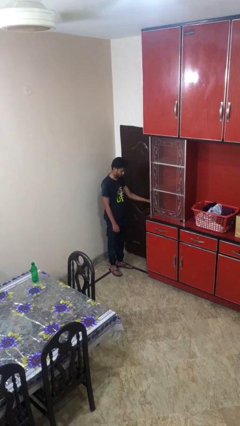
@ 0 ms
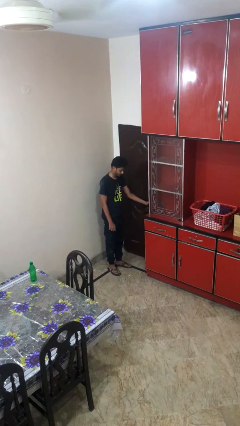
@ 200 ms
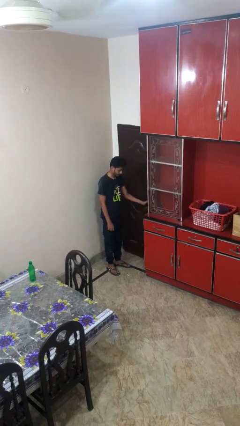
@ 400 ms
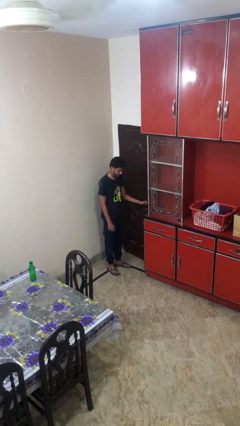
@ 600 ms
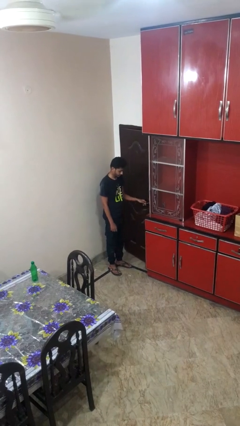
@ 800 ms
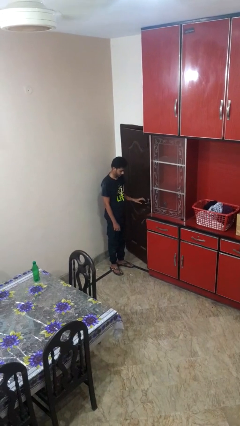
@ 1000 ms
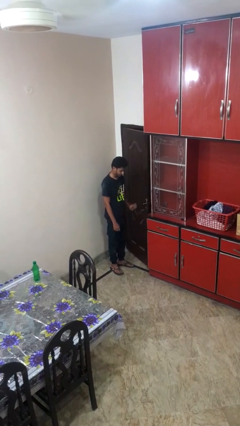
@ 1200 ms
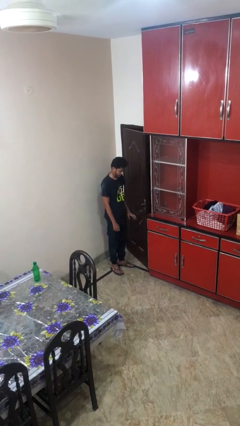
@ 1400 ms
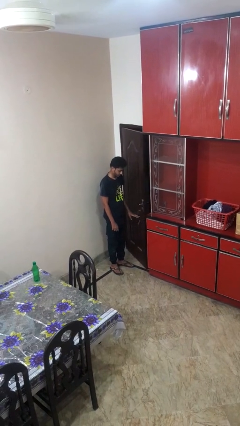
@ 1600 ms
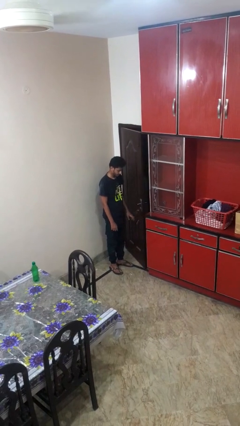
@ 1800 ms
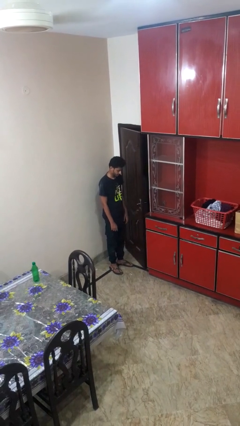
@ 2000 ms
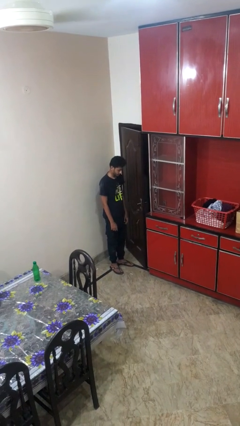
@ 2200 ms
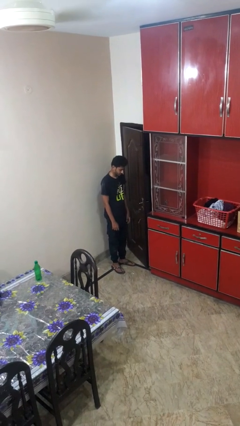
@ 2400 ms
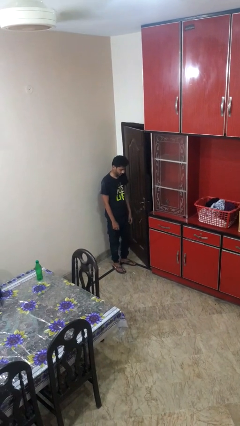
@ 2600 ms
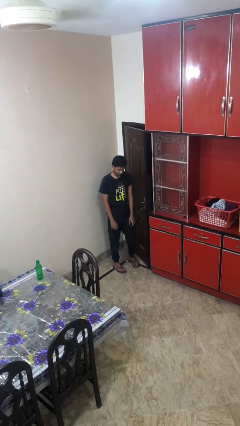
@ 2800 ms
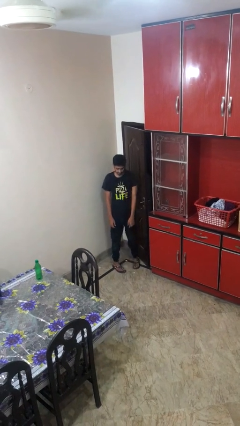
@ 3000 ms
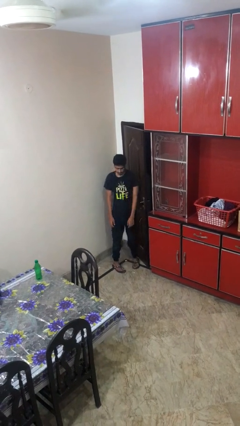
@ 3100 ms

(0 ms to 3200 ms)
person opens facility door

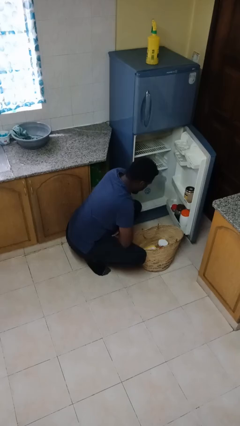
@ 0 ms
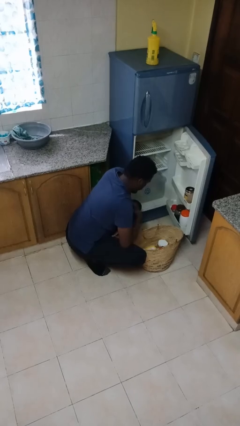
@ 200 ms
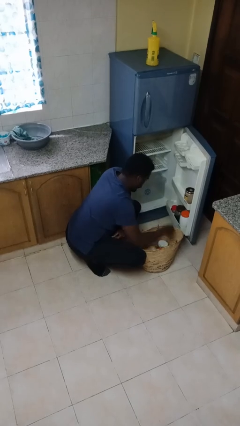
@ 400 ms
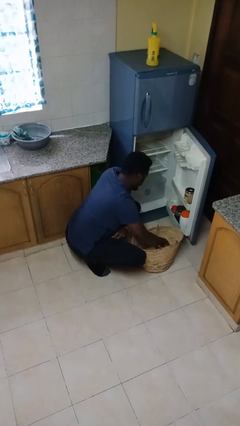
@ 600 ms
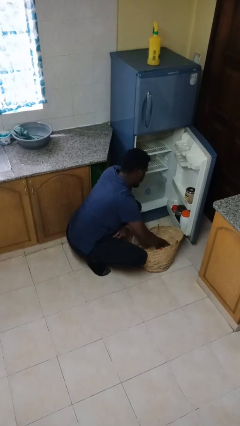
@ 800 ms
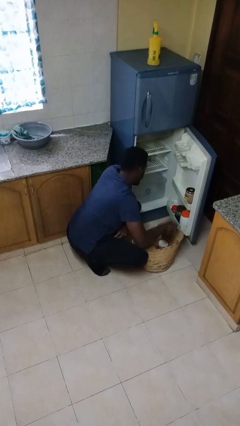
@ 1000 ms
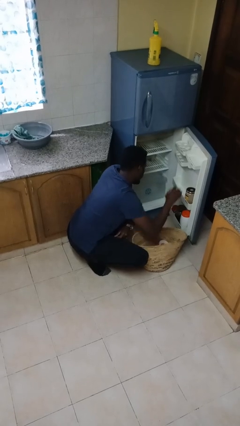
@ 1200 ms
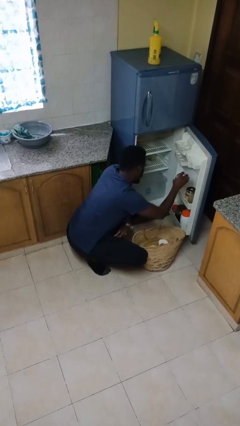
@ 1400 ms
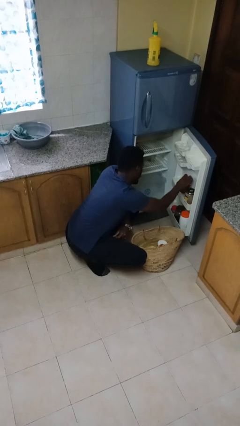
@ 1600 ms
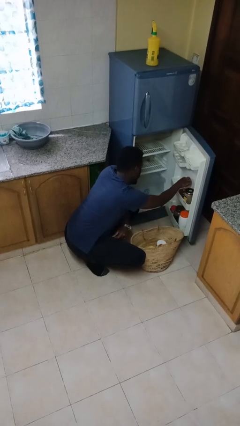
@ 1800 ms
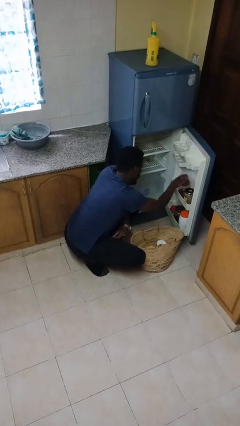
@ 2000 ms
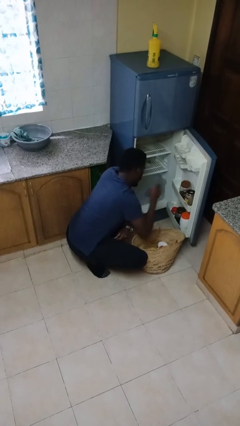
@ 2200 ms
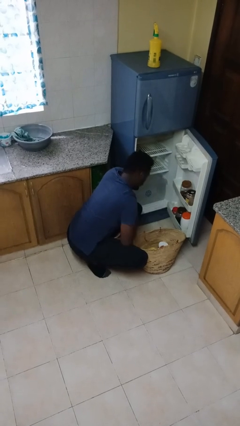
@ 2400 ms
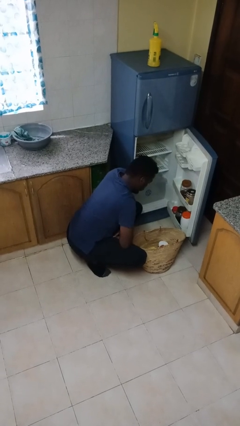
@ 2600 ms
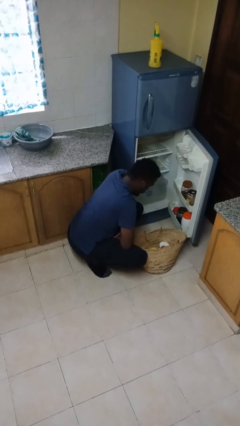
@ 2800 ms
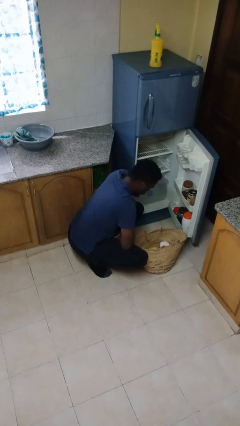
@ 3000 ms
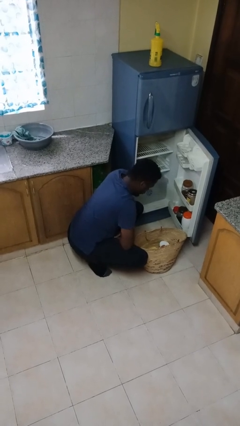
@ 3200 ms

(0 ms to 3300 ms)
person loads groceries into refrigerator

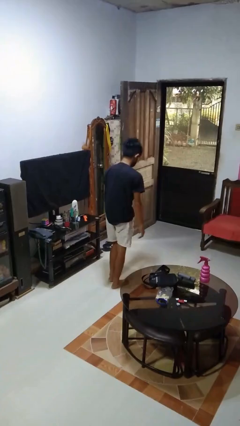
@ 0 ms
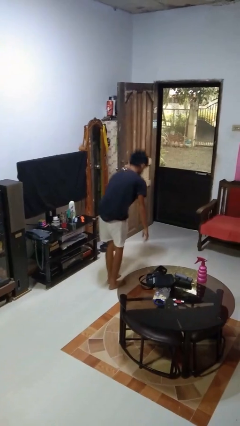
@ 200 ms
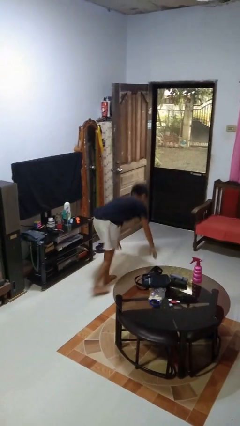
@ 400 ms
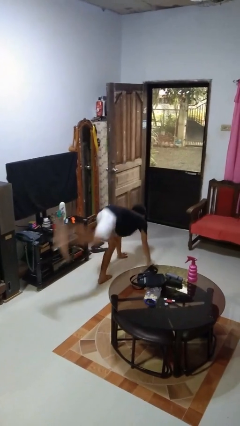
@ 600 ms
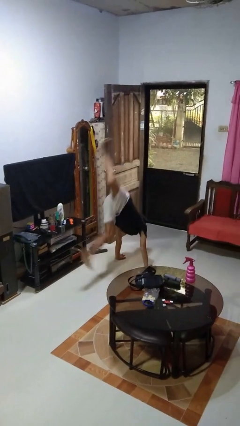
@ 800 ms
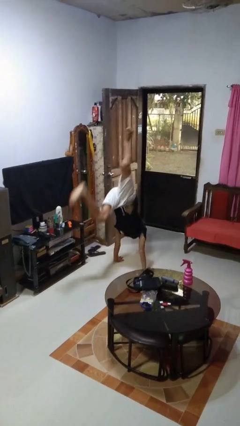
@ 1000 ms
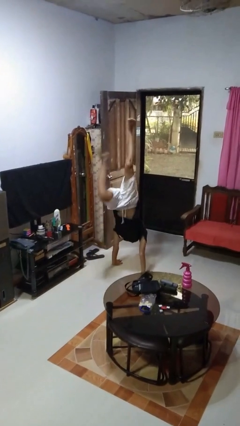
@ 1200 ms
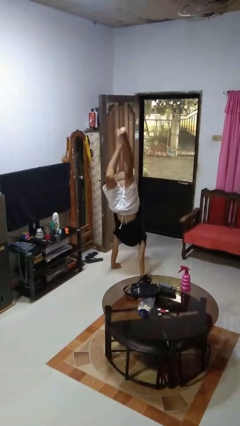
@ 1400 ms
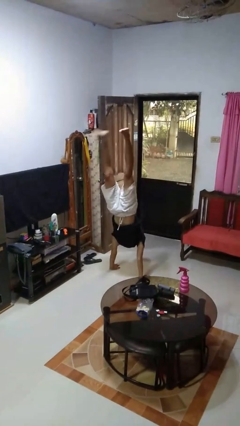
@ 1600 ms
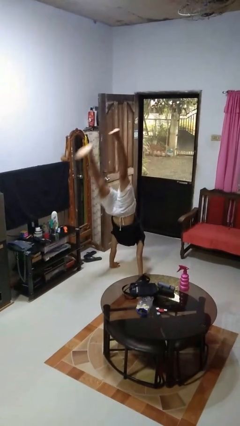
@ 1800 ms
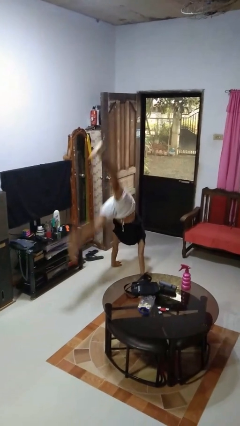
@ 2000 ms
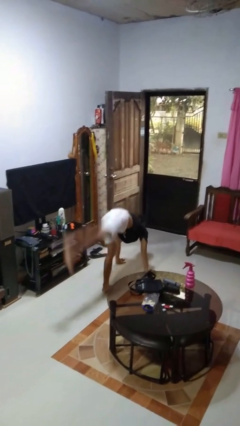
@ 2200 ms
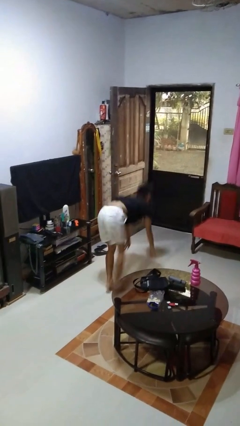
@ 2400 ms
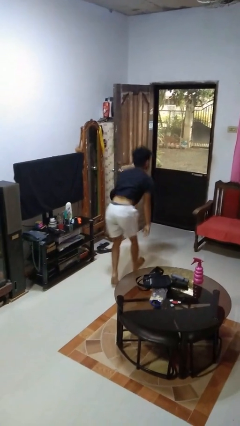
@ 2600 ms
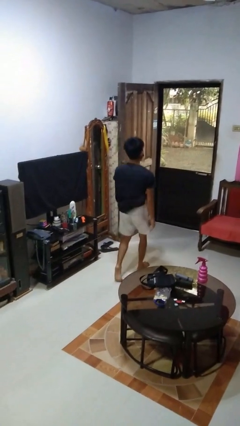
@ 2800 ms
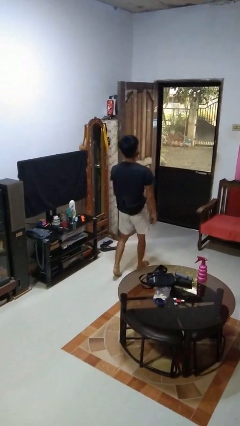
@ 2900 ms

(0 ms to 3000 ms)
person handstand

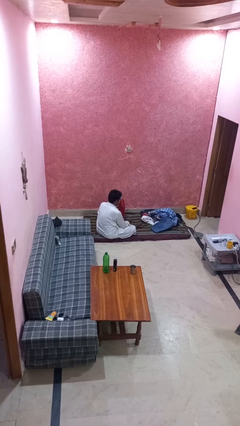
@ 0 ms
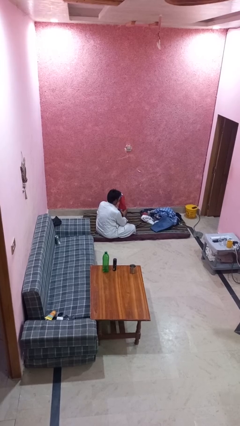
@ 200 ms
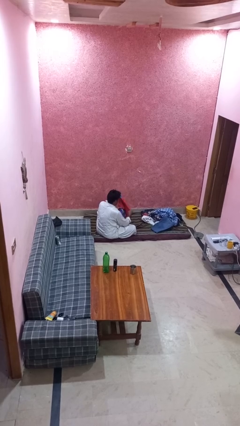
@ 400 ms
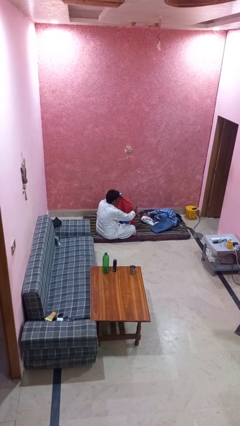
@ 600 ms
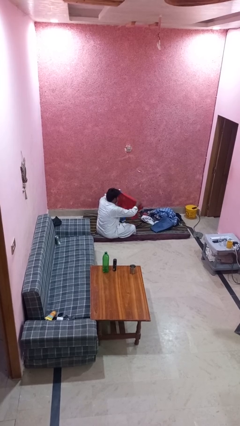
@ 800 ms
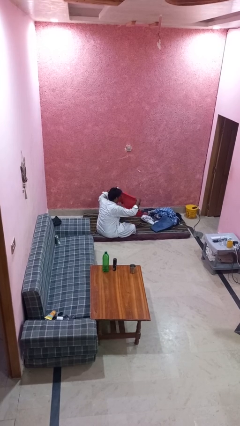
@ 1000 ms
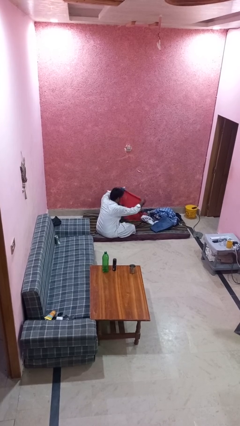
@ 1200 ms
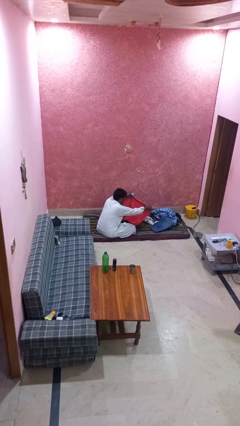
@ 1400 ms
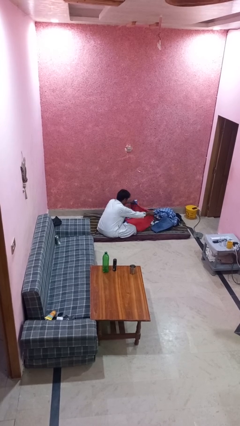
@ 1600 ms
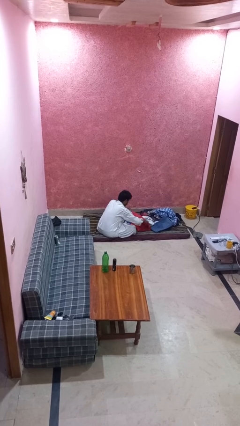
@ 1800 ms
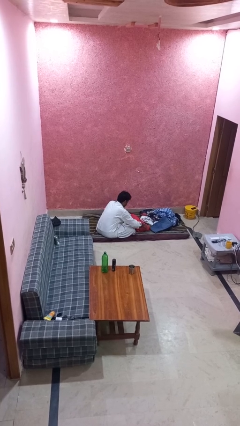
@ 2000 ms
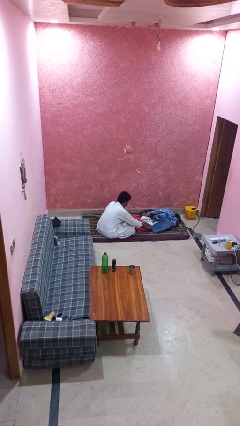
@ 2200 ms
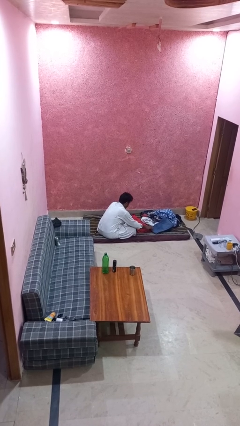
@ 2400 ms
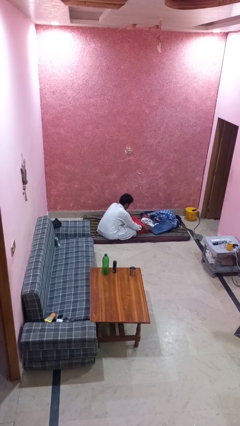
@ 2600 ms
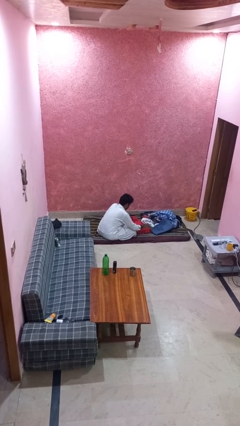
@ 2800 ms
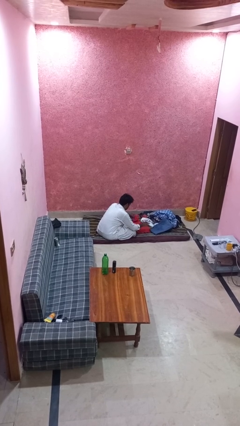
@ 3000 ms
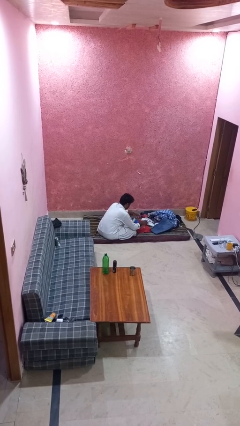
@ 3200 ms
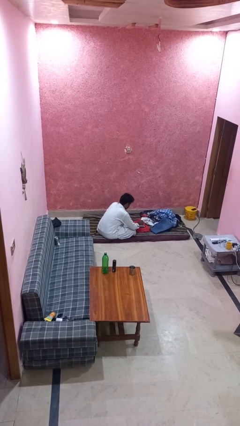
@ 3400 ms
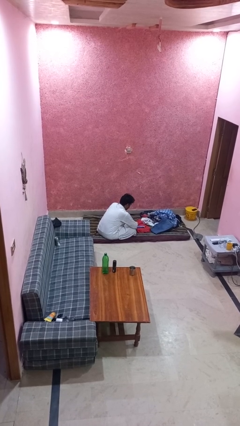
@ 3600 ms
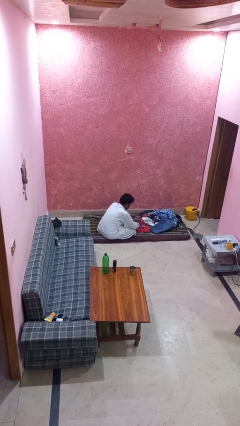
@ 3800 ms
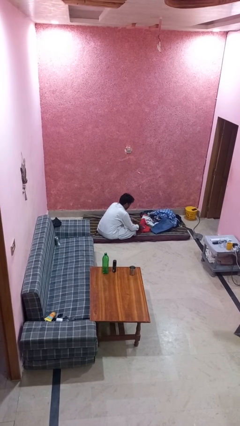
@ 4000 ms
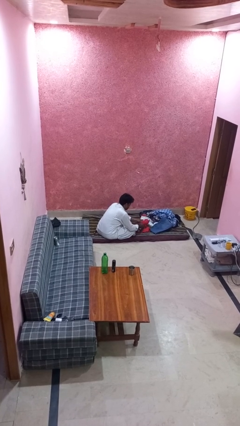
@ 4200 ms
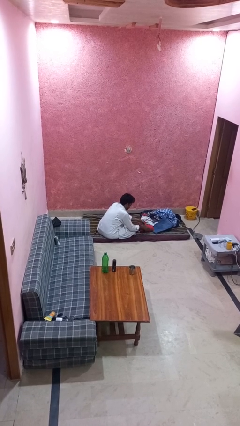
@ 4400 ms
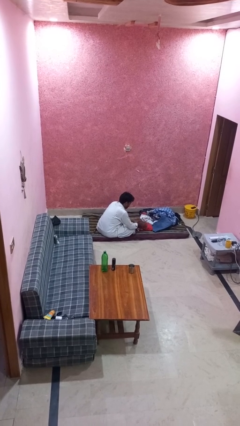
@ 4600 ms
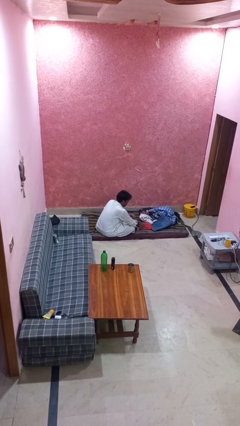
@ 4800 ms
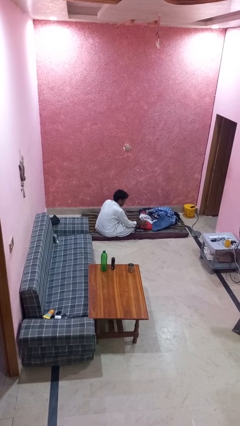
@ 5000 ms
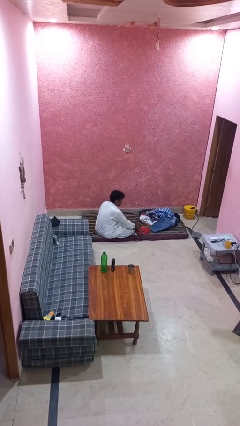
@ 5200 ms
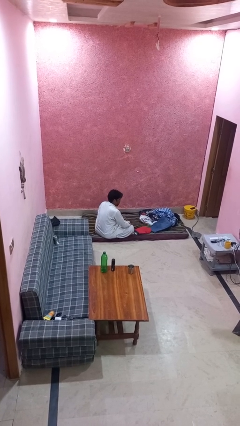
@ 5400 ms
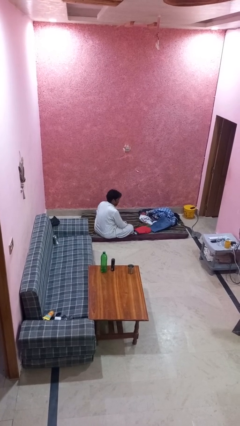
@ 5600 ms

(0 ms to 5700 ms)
person folds shirt

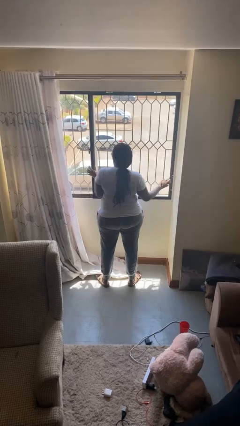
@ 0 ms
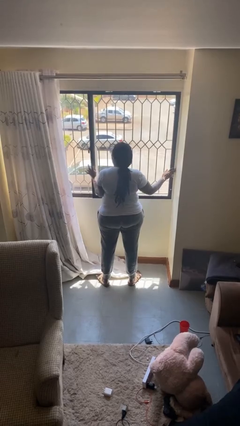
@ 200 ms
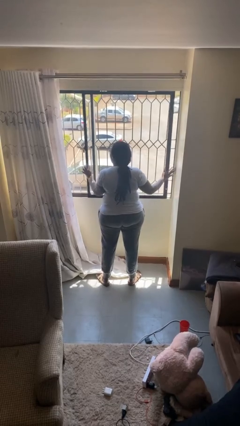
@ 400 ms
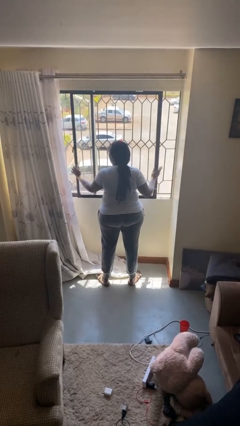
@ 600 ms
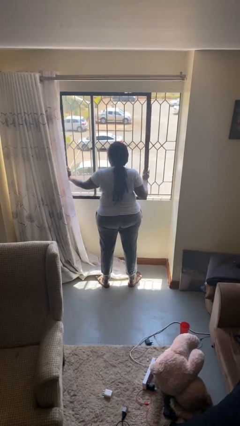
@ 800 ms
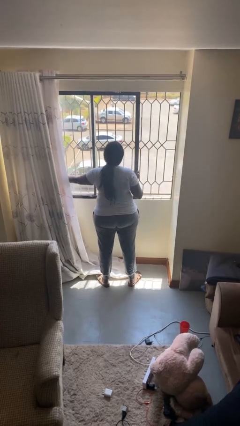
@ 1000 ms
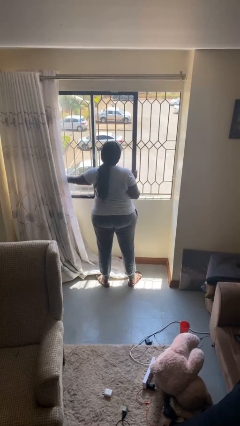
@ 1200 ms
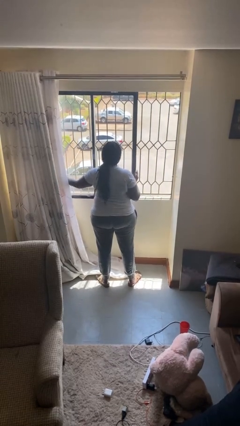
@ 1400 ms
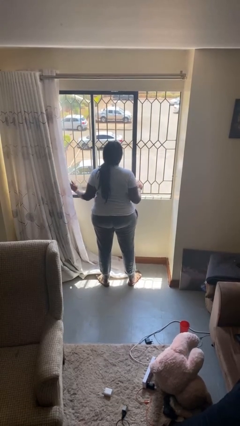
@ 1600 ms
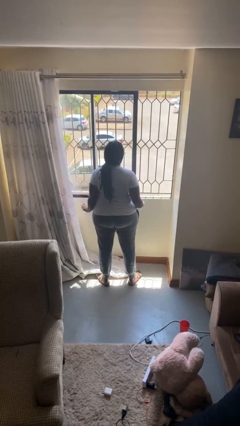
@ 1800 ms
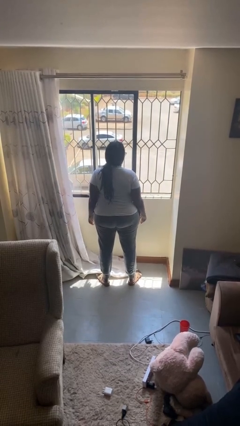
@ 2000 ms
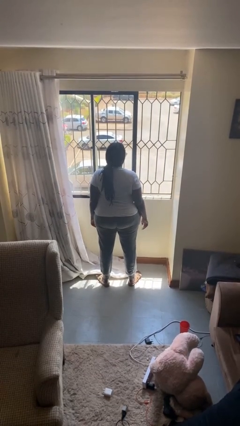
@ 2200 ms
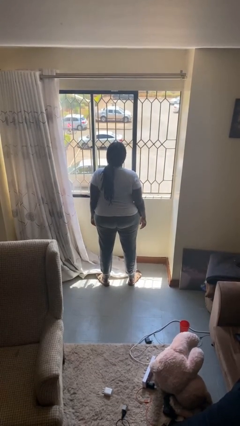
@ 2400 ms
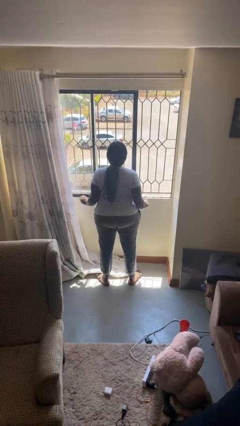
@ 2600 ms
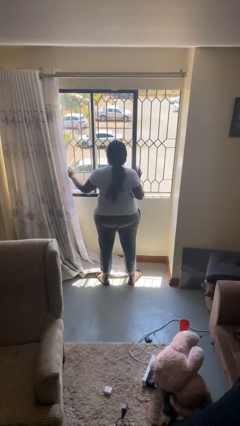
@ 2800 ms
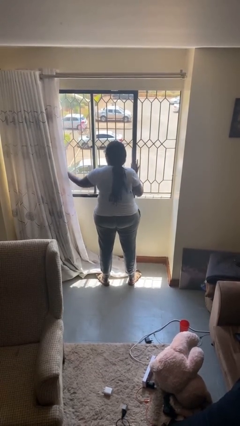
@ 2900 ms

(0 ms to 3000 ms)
person opens home window
